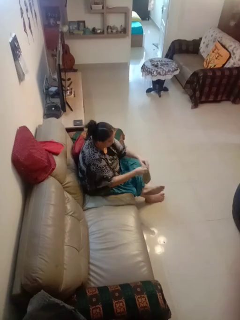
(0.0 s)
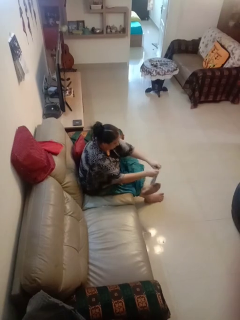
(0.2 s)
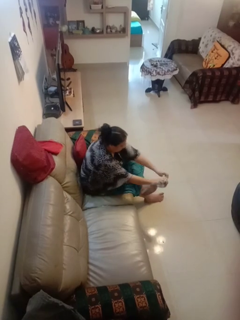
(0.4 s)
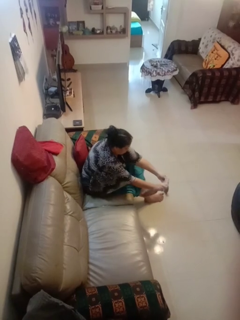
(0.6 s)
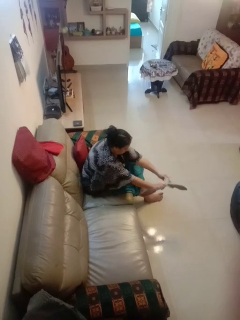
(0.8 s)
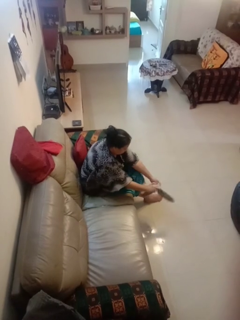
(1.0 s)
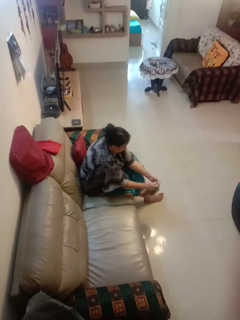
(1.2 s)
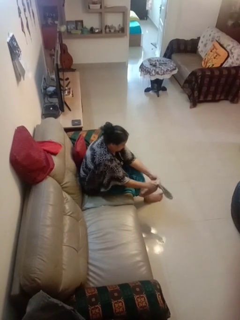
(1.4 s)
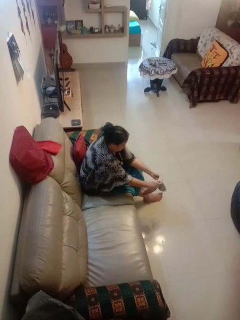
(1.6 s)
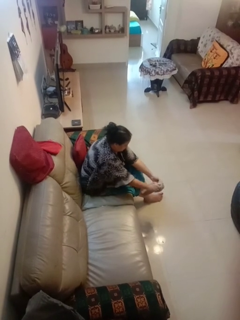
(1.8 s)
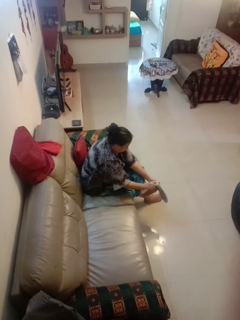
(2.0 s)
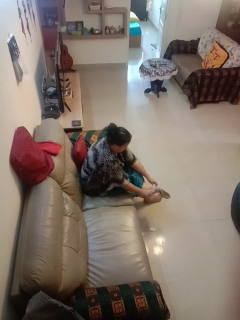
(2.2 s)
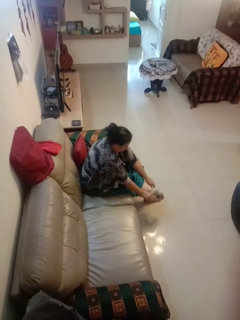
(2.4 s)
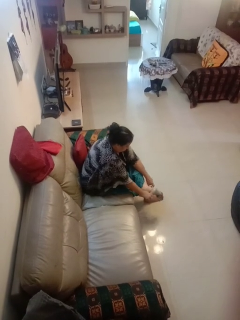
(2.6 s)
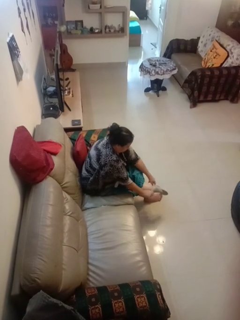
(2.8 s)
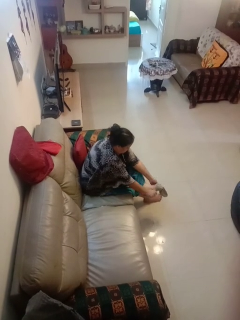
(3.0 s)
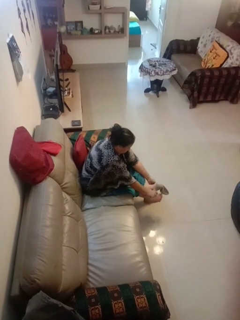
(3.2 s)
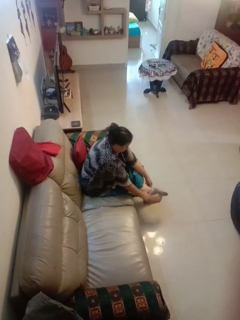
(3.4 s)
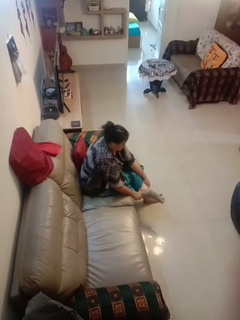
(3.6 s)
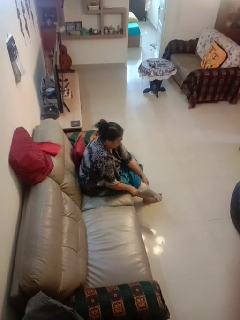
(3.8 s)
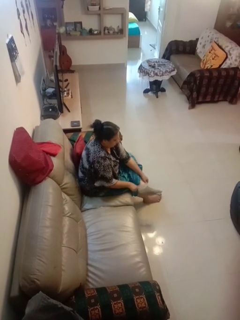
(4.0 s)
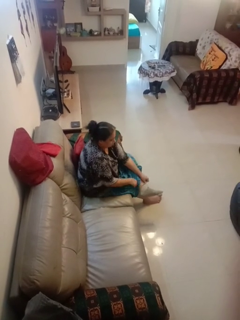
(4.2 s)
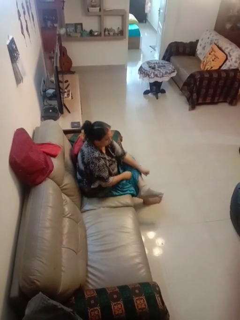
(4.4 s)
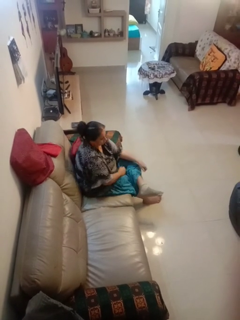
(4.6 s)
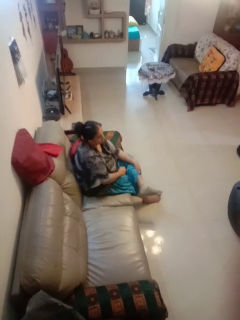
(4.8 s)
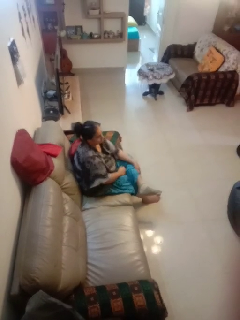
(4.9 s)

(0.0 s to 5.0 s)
person puts on socks

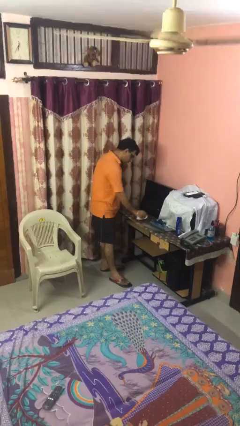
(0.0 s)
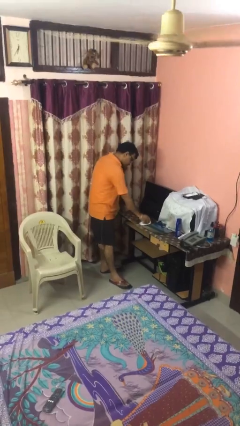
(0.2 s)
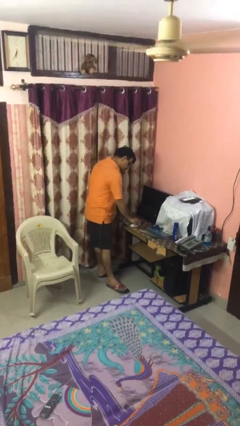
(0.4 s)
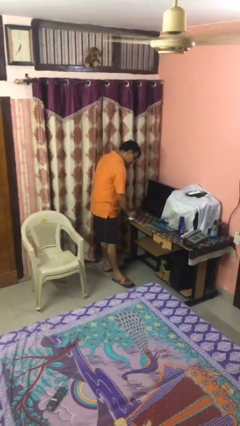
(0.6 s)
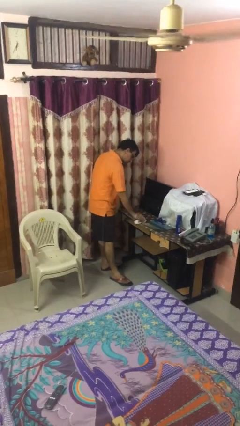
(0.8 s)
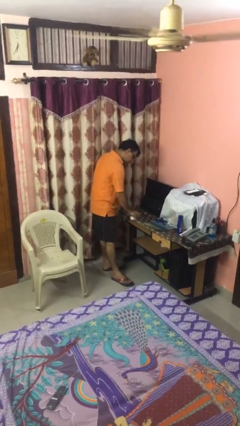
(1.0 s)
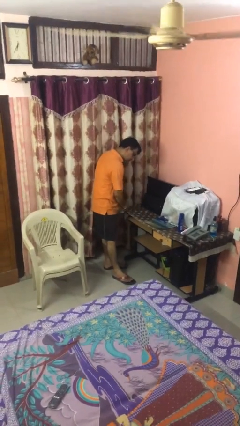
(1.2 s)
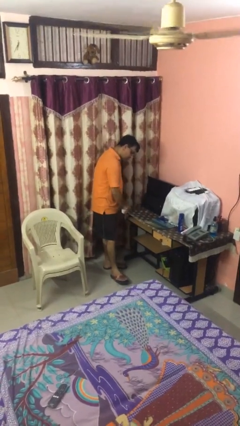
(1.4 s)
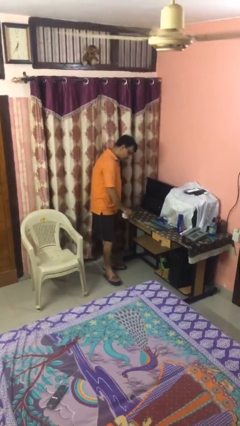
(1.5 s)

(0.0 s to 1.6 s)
person cleans table with rag

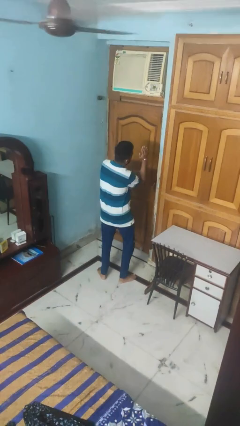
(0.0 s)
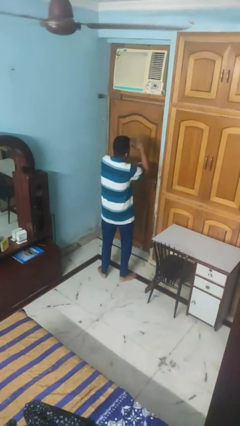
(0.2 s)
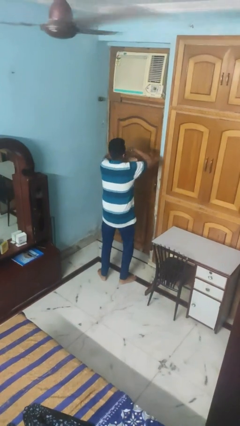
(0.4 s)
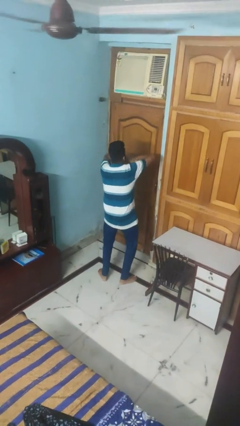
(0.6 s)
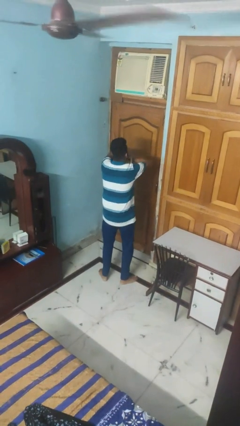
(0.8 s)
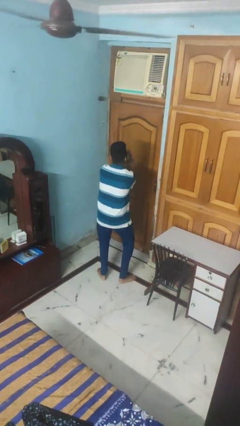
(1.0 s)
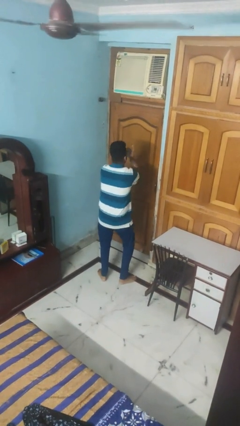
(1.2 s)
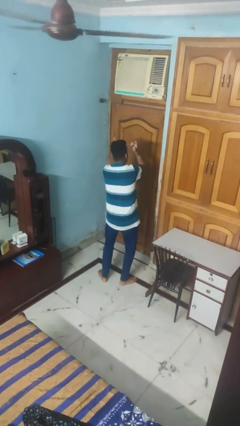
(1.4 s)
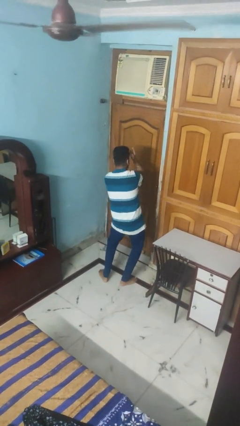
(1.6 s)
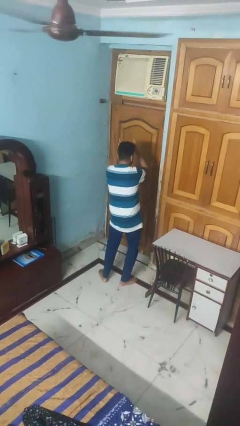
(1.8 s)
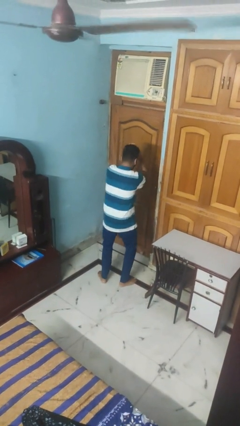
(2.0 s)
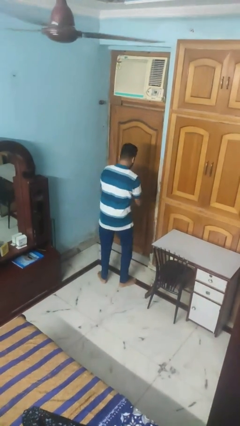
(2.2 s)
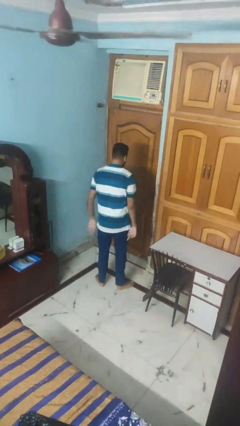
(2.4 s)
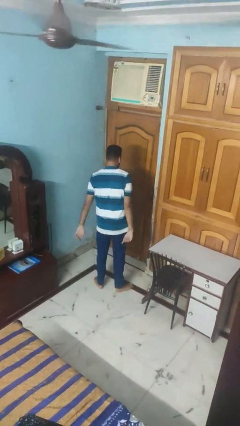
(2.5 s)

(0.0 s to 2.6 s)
person dances in place

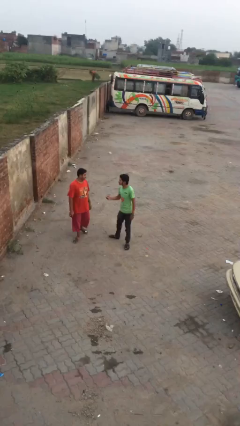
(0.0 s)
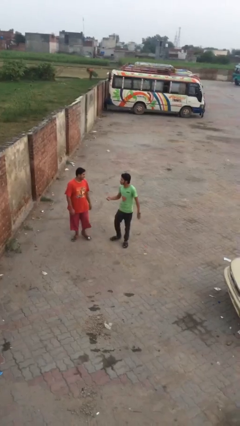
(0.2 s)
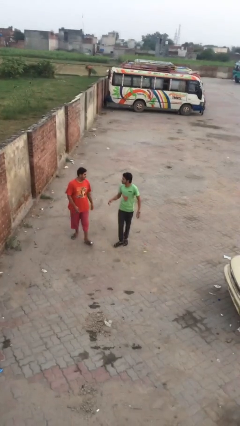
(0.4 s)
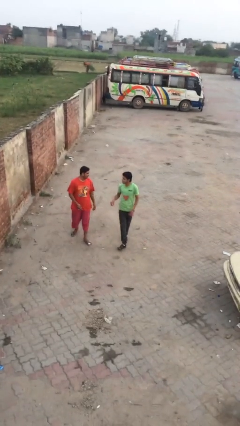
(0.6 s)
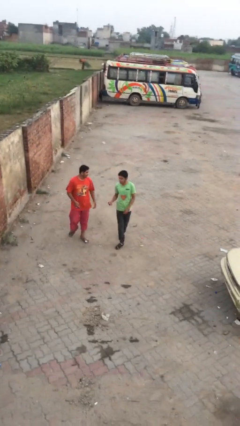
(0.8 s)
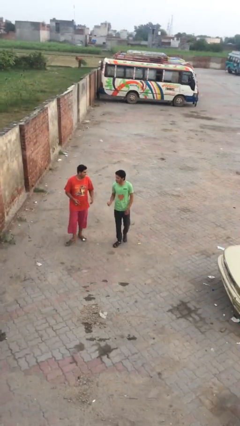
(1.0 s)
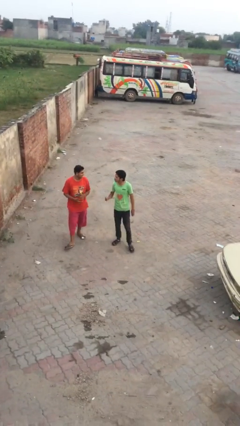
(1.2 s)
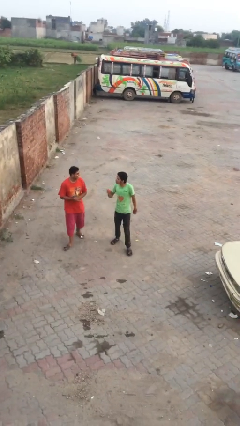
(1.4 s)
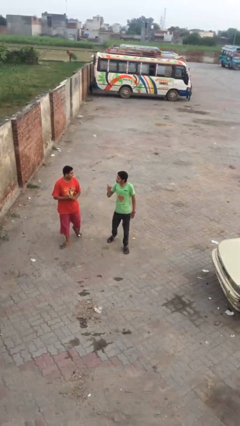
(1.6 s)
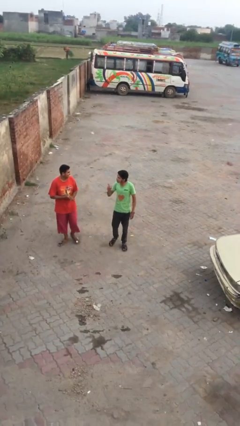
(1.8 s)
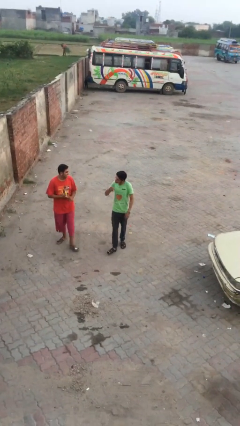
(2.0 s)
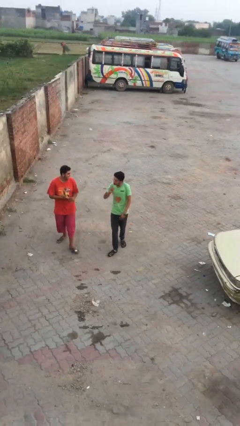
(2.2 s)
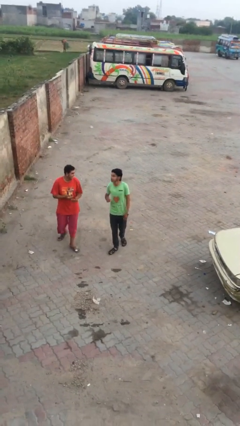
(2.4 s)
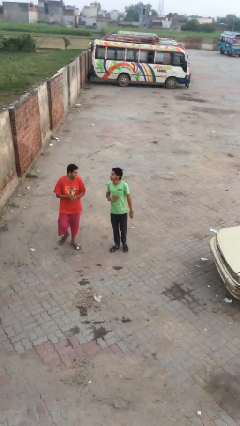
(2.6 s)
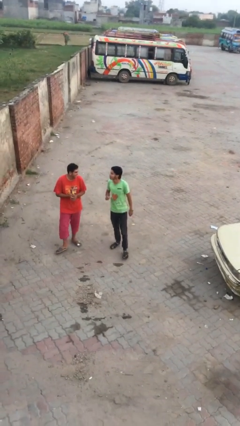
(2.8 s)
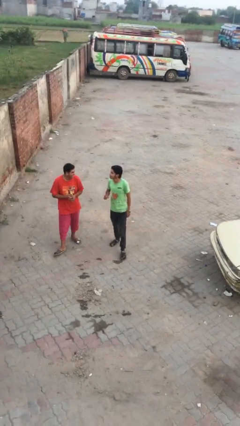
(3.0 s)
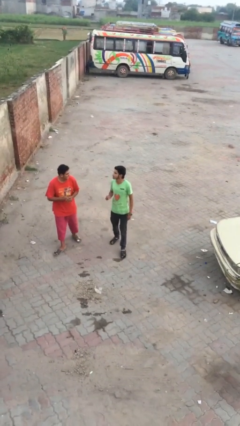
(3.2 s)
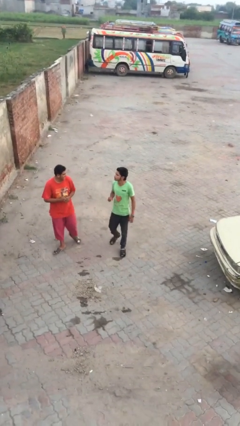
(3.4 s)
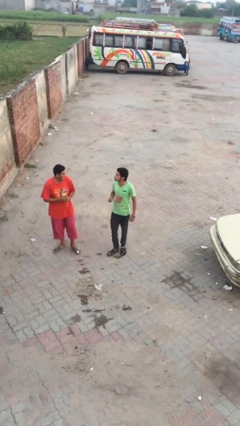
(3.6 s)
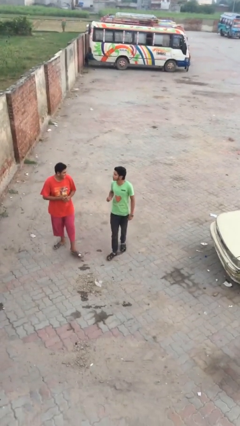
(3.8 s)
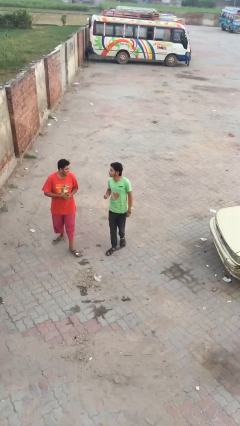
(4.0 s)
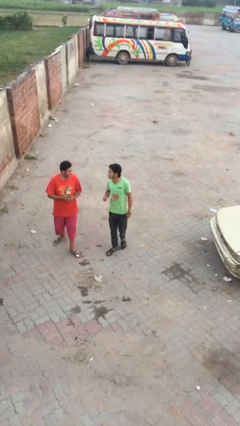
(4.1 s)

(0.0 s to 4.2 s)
person talks to person

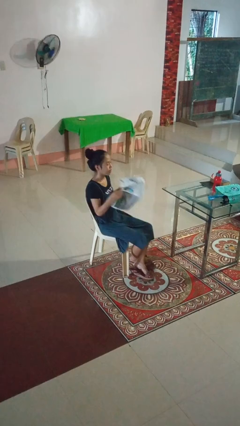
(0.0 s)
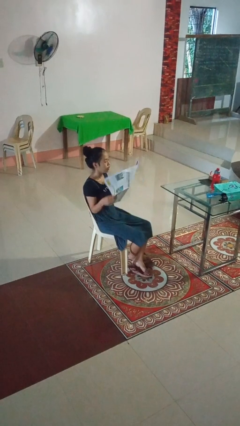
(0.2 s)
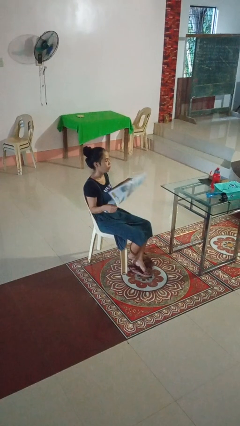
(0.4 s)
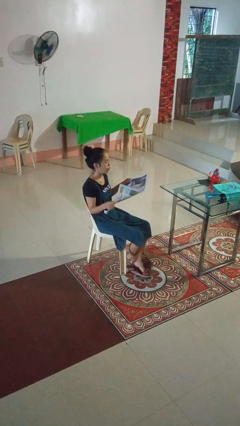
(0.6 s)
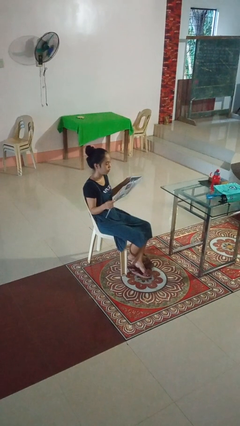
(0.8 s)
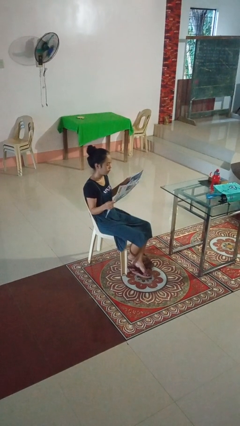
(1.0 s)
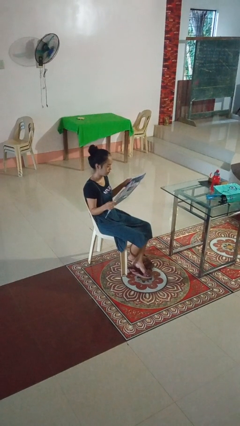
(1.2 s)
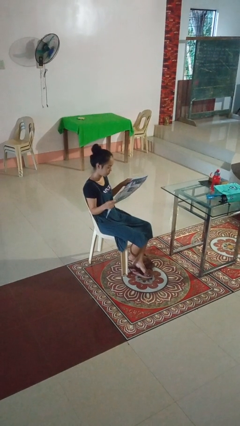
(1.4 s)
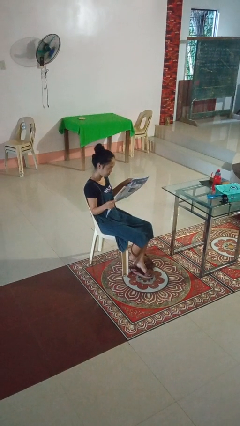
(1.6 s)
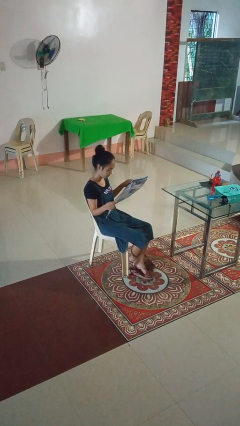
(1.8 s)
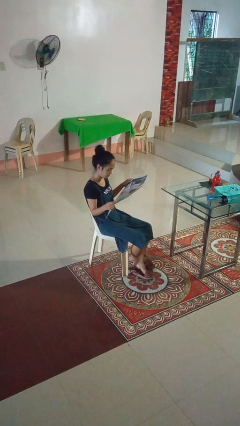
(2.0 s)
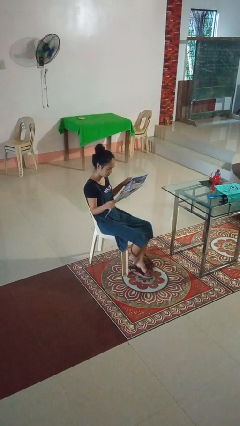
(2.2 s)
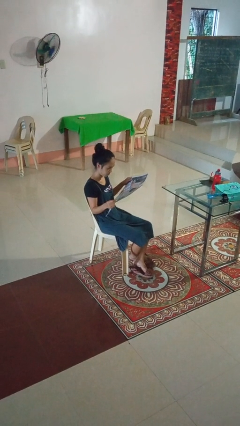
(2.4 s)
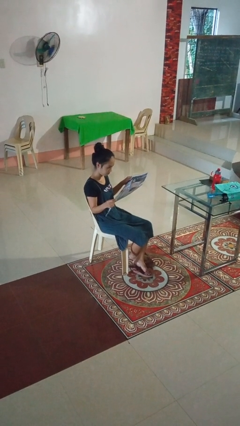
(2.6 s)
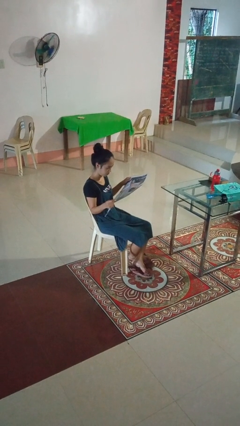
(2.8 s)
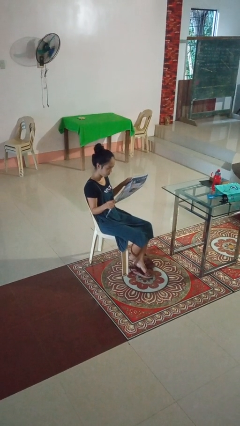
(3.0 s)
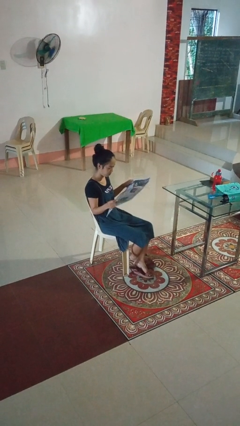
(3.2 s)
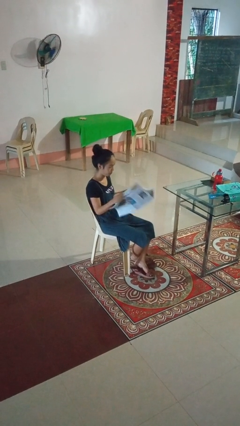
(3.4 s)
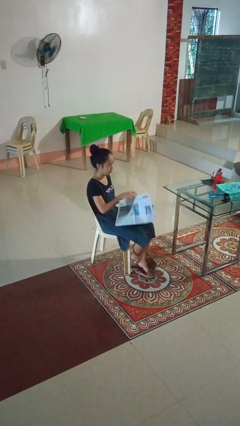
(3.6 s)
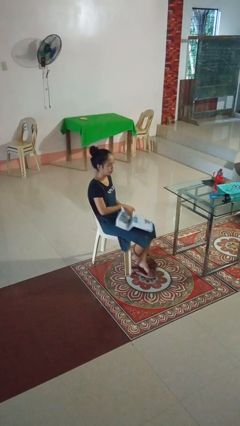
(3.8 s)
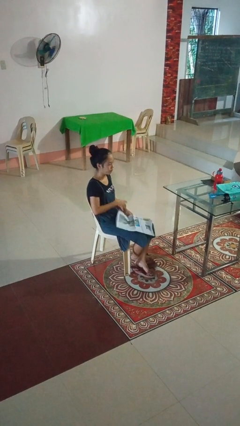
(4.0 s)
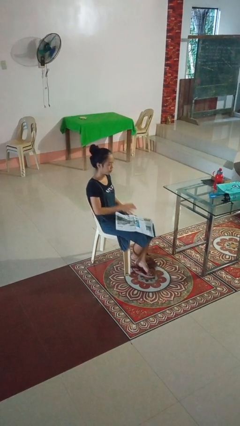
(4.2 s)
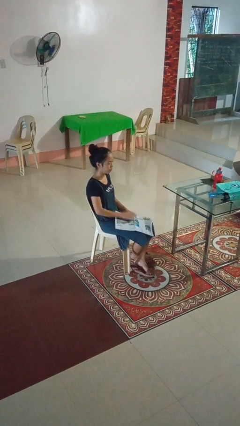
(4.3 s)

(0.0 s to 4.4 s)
person reads newspaper

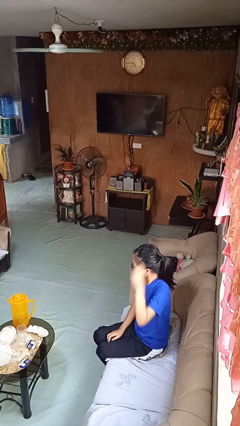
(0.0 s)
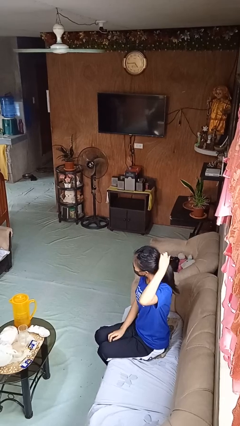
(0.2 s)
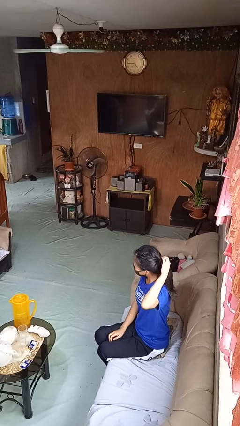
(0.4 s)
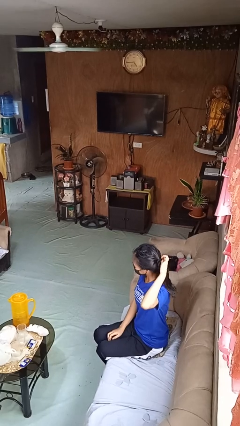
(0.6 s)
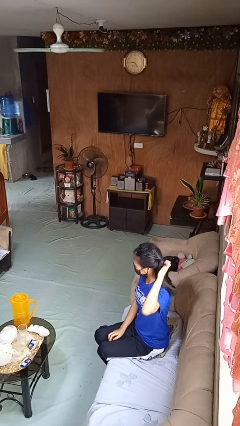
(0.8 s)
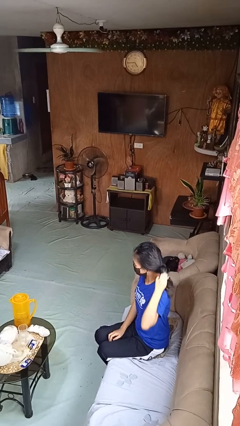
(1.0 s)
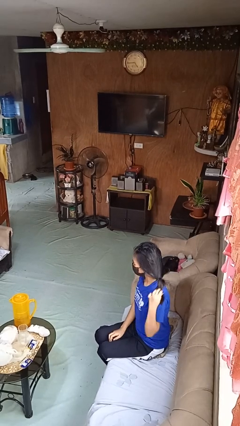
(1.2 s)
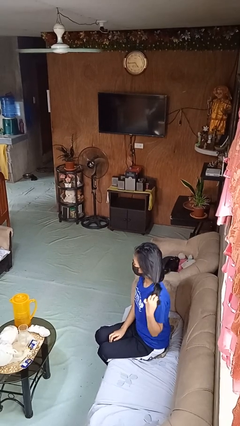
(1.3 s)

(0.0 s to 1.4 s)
person takes off hairtie
